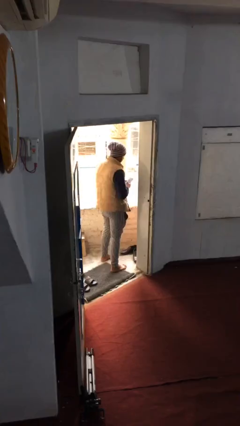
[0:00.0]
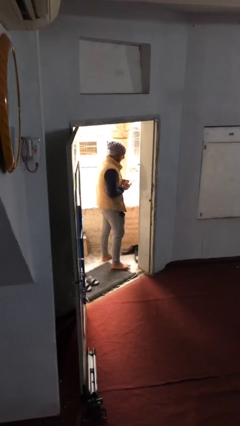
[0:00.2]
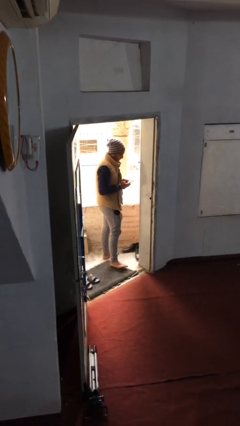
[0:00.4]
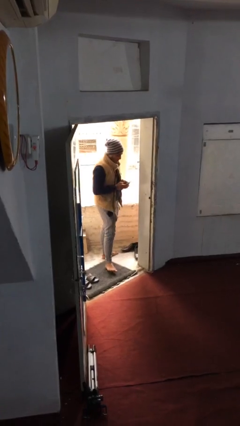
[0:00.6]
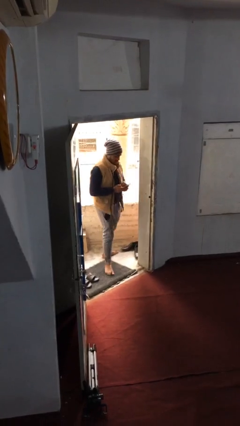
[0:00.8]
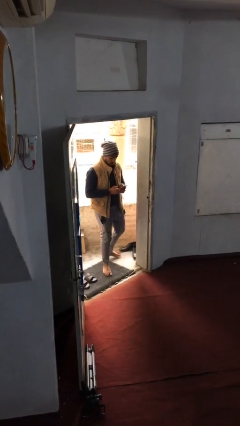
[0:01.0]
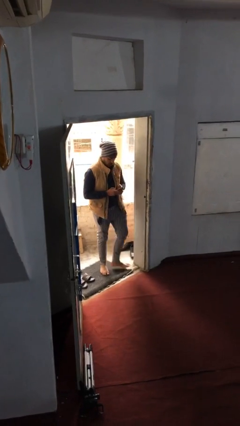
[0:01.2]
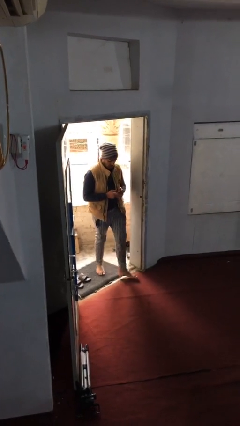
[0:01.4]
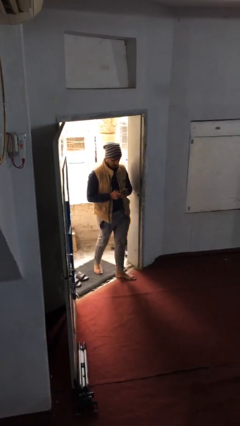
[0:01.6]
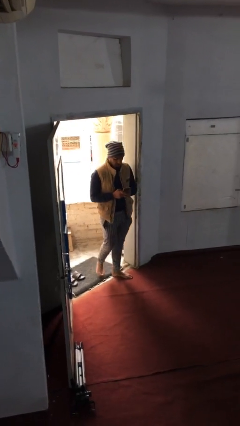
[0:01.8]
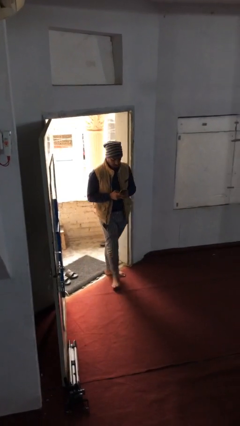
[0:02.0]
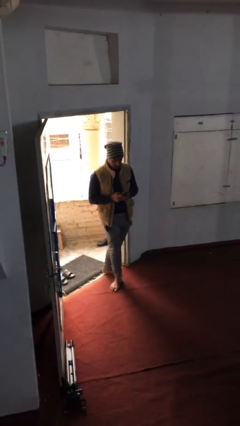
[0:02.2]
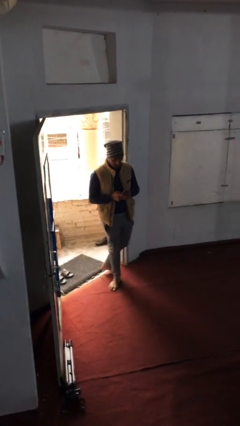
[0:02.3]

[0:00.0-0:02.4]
person enters scene through structure

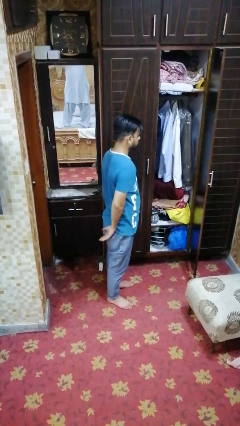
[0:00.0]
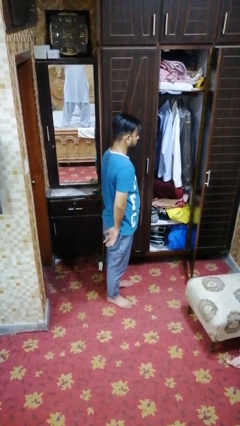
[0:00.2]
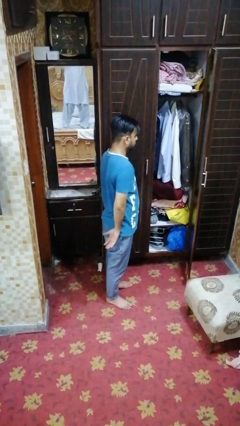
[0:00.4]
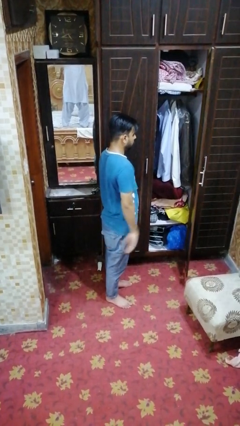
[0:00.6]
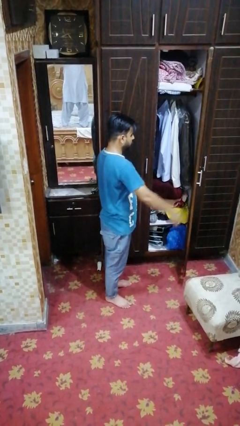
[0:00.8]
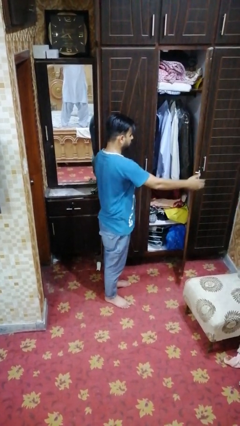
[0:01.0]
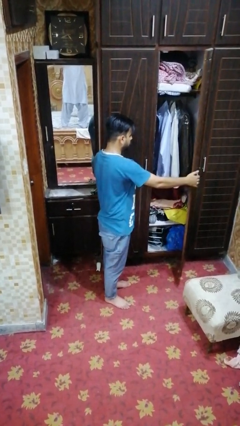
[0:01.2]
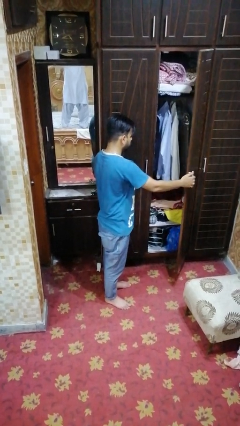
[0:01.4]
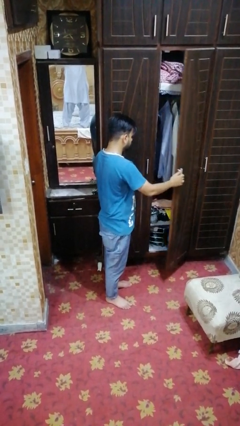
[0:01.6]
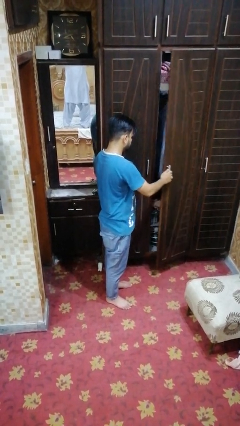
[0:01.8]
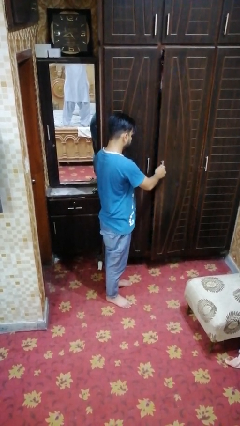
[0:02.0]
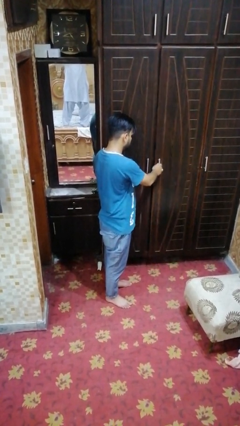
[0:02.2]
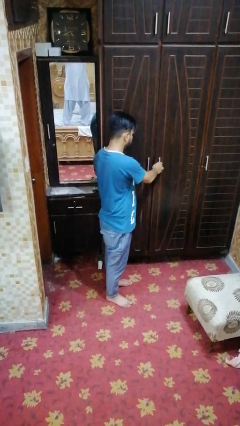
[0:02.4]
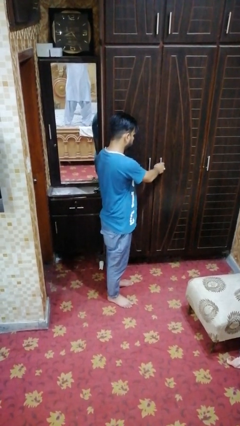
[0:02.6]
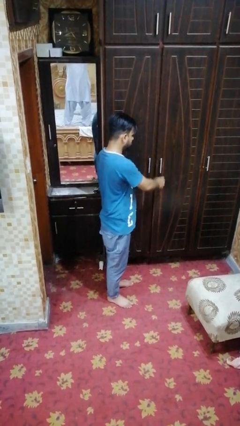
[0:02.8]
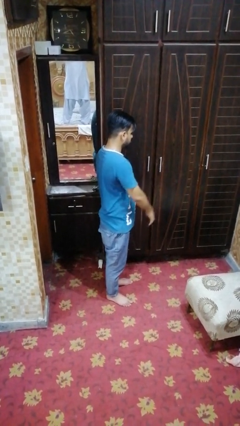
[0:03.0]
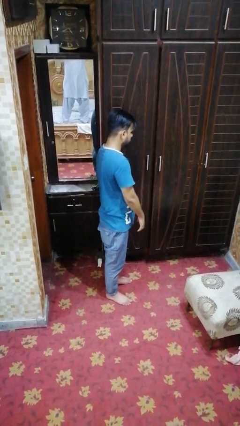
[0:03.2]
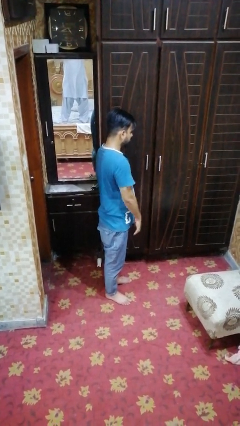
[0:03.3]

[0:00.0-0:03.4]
person closes closet door

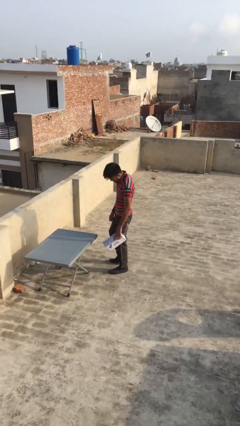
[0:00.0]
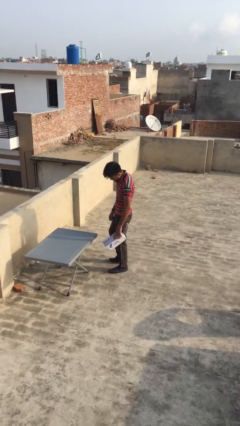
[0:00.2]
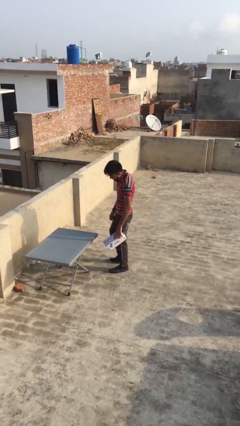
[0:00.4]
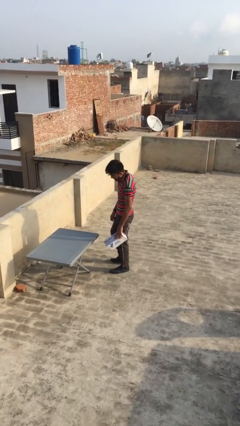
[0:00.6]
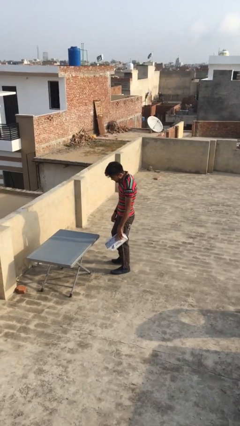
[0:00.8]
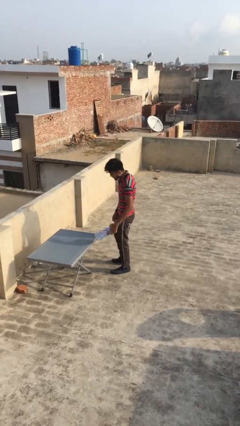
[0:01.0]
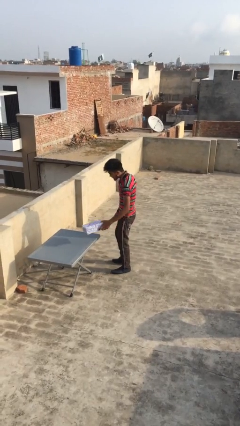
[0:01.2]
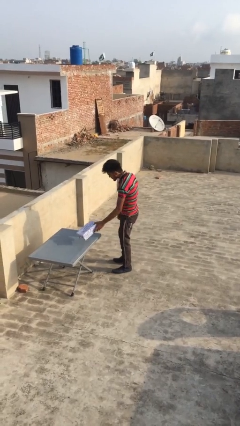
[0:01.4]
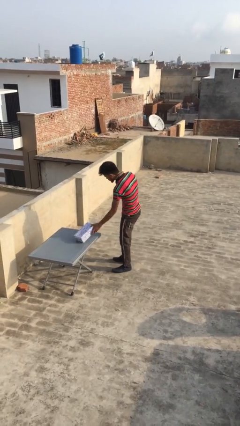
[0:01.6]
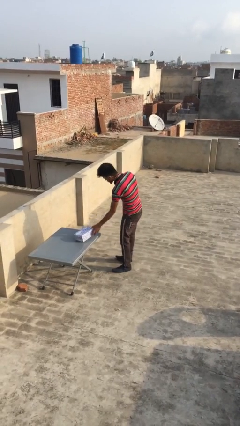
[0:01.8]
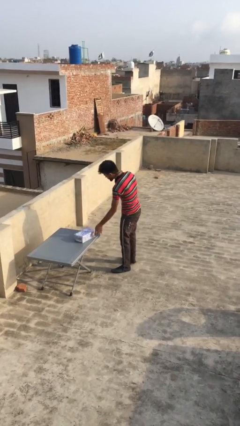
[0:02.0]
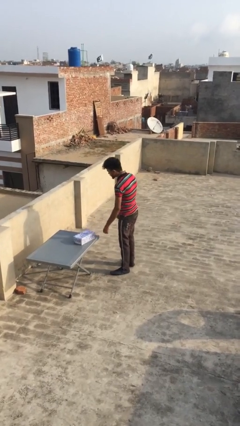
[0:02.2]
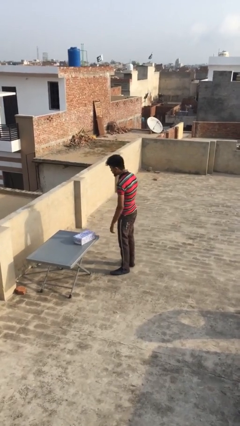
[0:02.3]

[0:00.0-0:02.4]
person puts down object on table

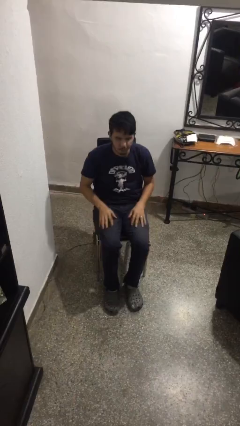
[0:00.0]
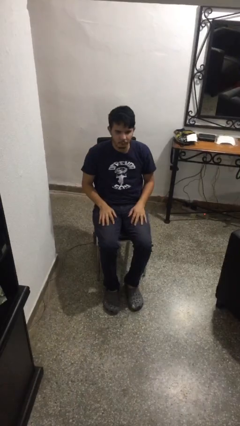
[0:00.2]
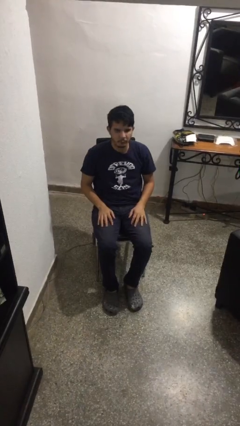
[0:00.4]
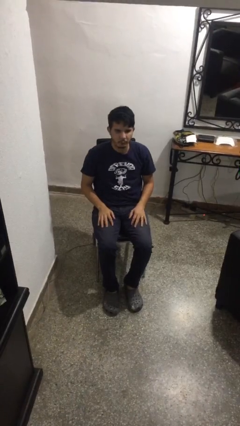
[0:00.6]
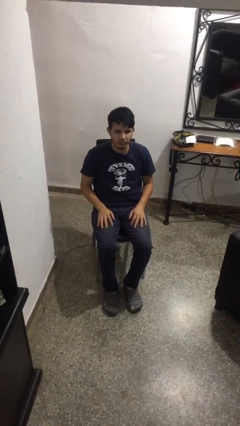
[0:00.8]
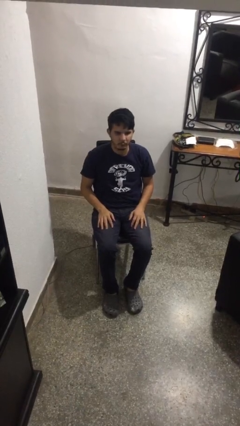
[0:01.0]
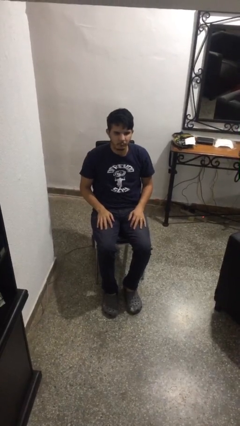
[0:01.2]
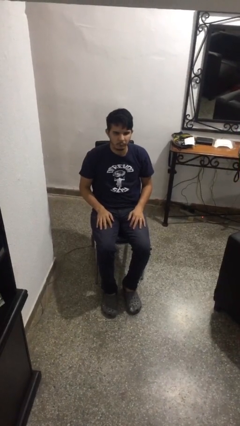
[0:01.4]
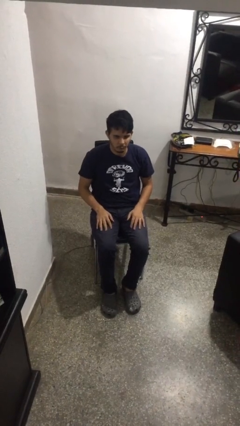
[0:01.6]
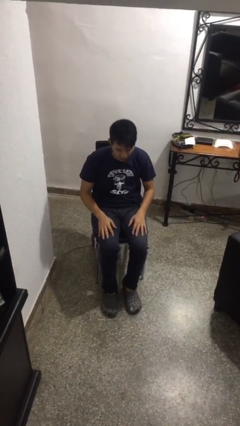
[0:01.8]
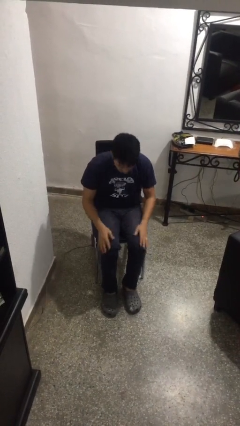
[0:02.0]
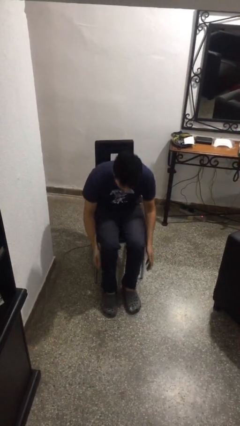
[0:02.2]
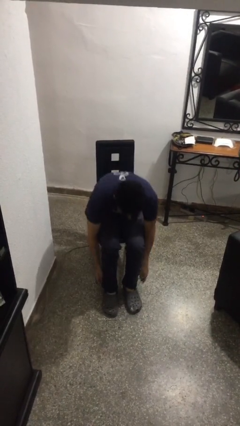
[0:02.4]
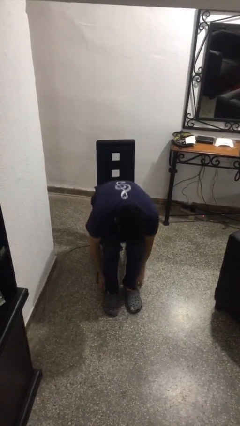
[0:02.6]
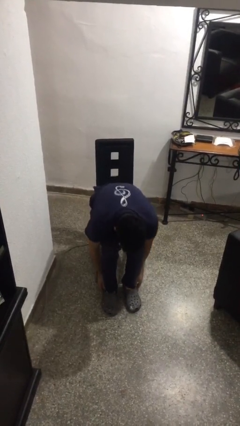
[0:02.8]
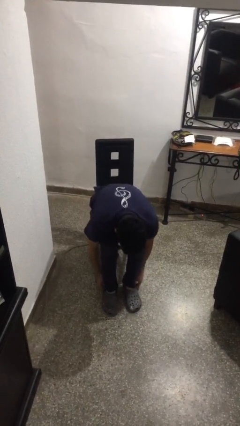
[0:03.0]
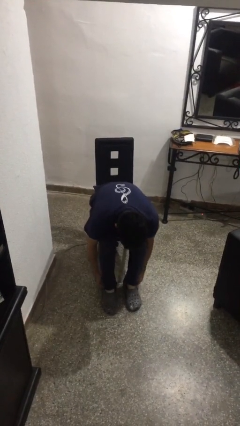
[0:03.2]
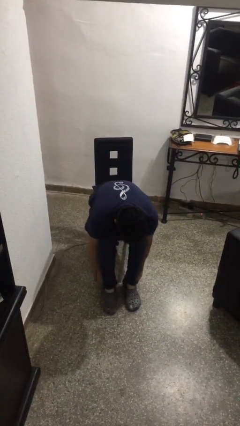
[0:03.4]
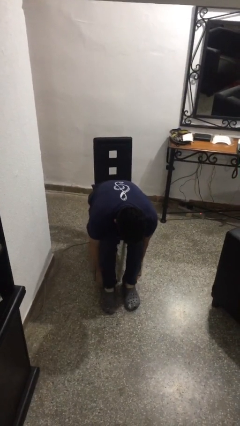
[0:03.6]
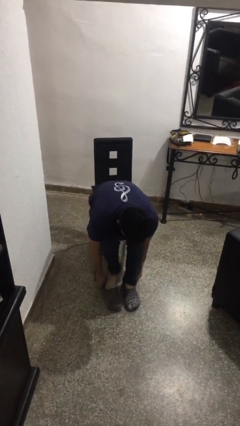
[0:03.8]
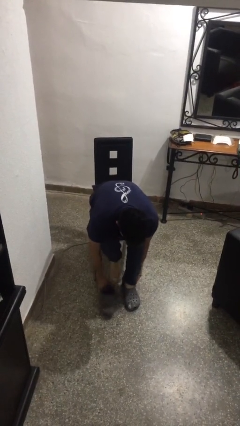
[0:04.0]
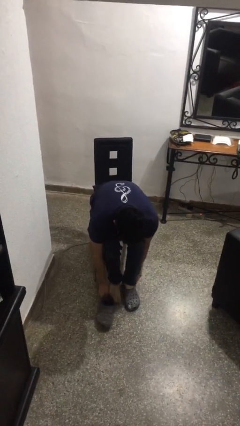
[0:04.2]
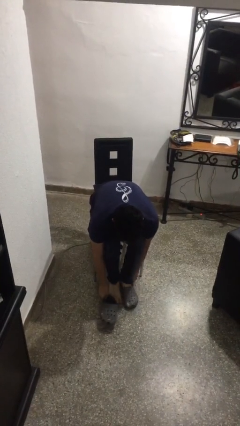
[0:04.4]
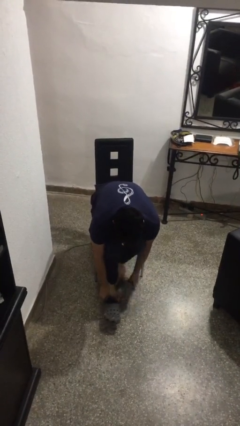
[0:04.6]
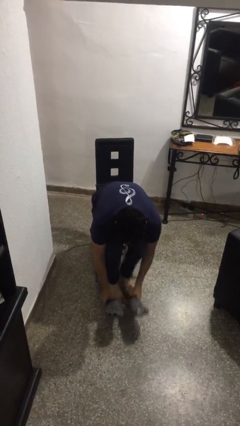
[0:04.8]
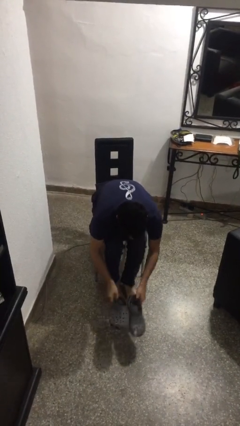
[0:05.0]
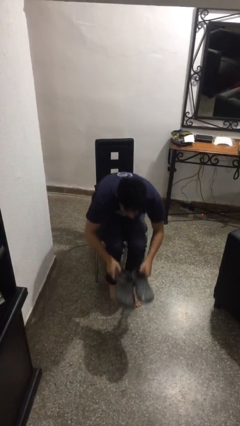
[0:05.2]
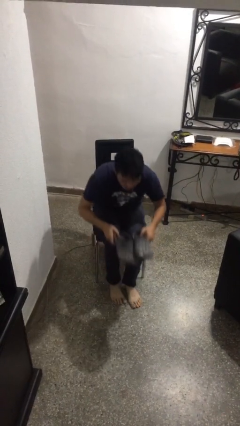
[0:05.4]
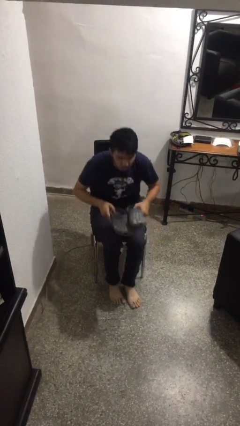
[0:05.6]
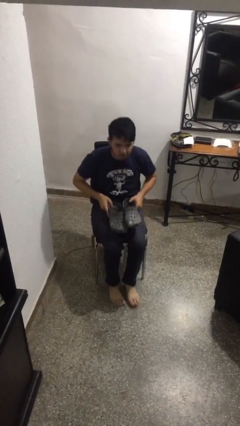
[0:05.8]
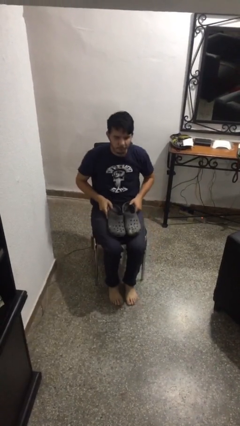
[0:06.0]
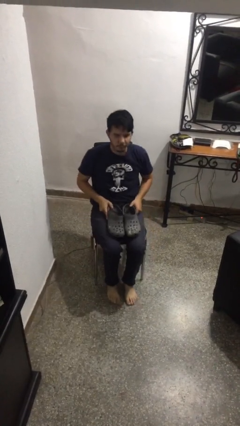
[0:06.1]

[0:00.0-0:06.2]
person takes off shoes

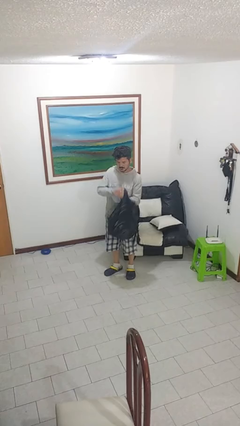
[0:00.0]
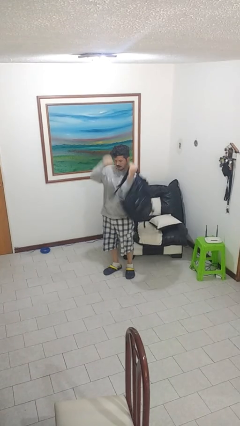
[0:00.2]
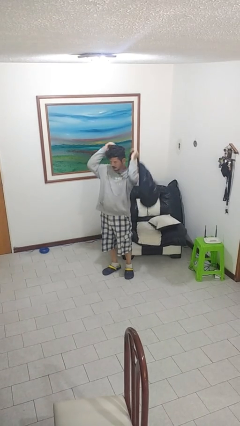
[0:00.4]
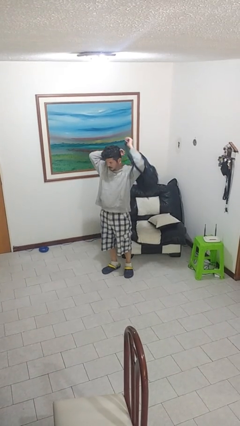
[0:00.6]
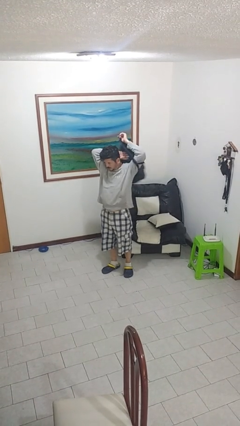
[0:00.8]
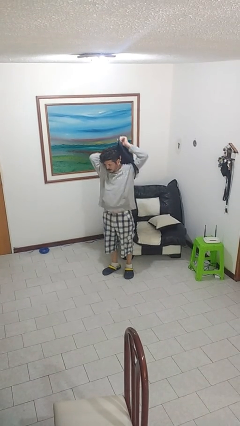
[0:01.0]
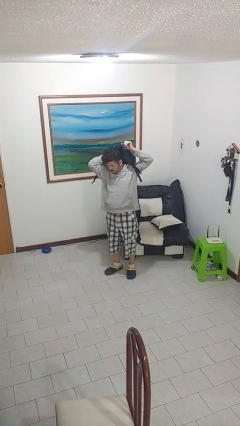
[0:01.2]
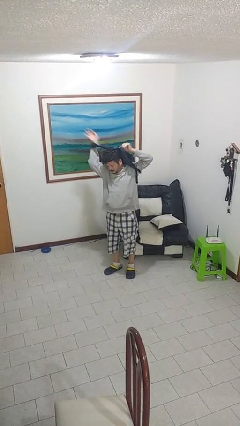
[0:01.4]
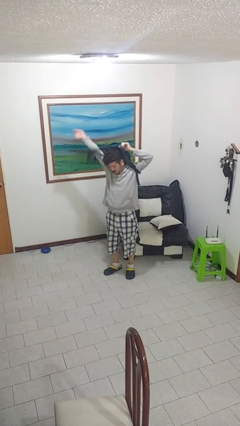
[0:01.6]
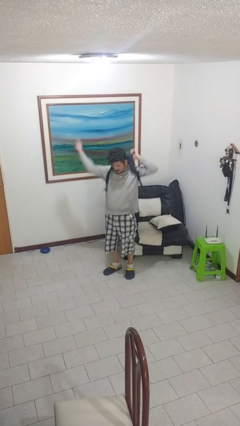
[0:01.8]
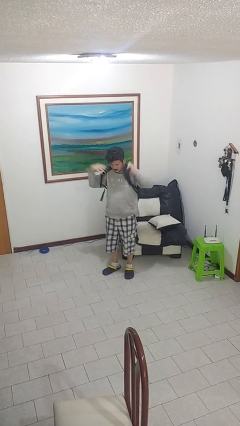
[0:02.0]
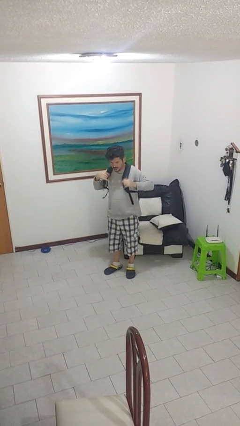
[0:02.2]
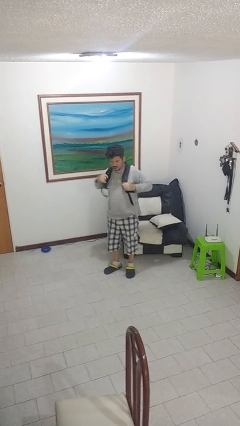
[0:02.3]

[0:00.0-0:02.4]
person puts on backpack

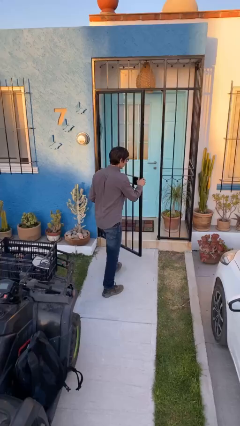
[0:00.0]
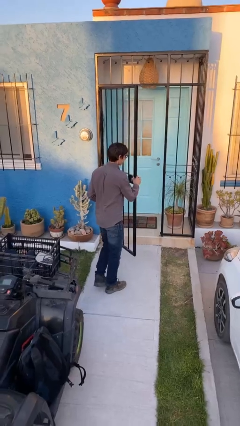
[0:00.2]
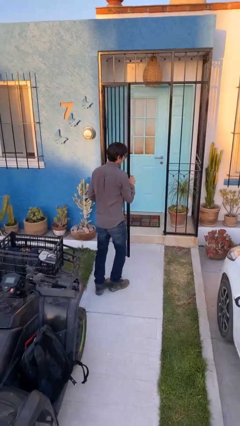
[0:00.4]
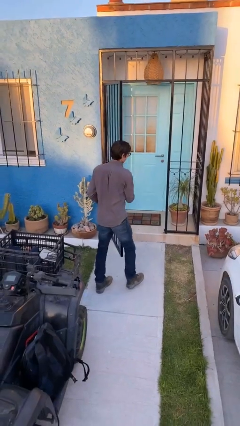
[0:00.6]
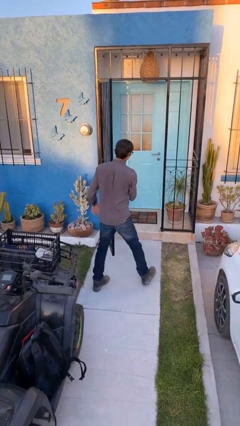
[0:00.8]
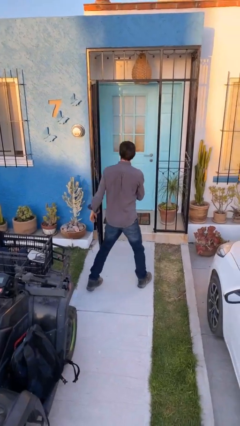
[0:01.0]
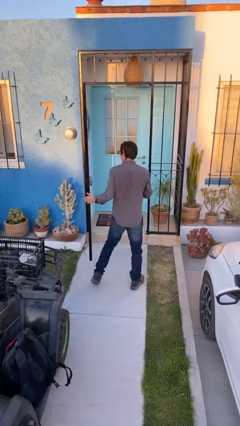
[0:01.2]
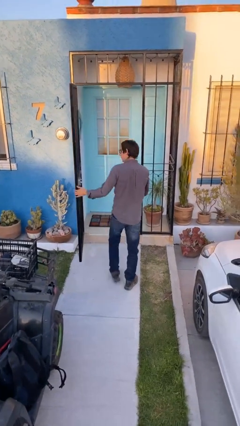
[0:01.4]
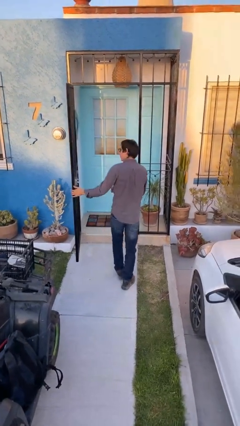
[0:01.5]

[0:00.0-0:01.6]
person opens facility door
